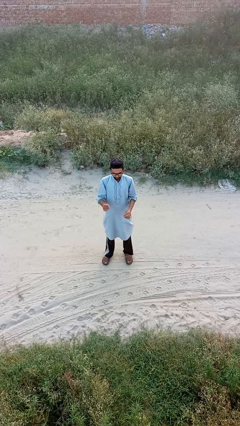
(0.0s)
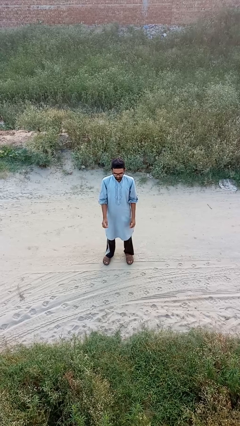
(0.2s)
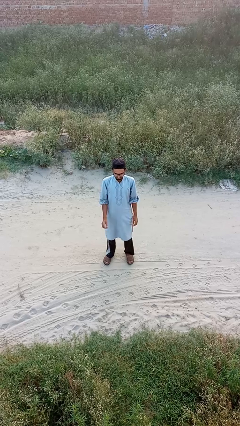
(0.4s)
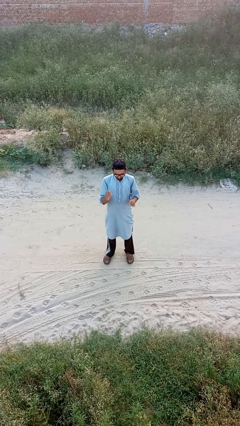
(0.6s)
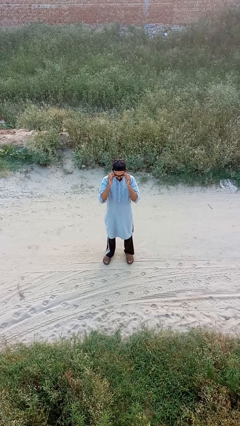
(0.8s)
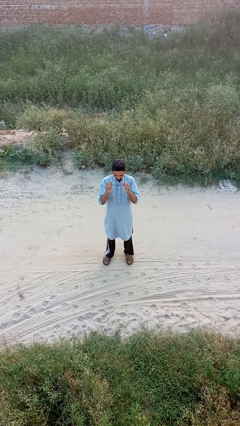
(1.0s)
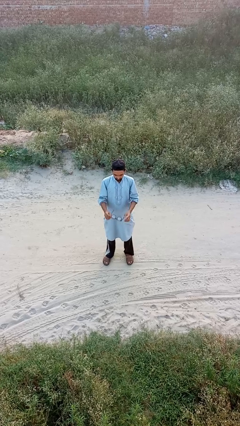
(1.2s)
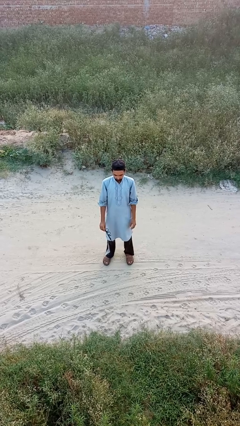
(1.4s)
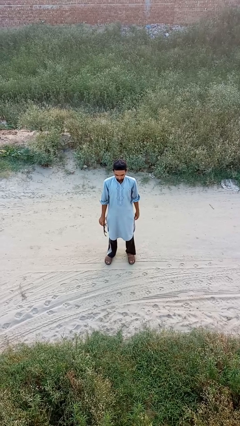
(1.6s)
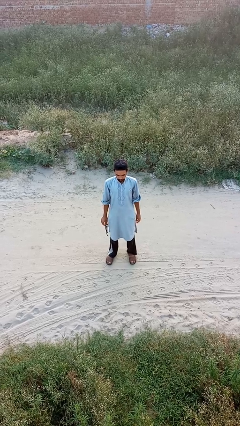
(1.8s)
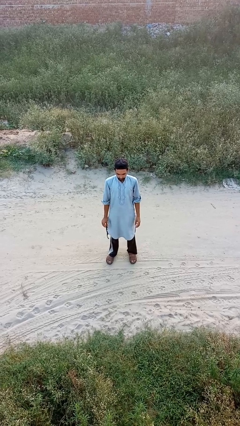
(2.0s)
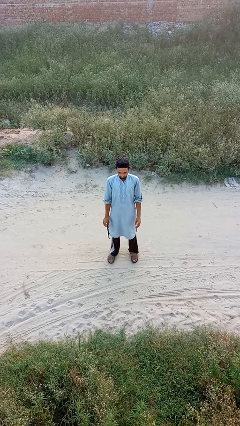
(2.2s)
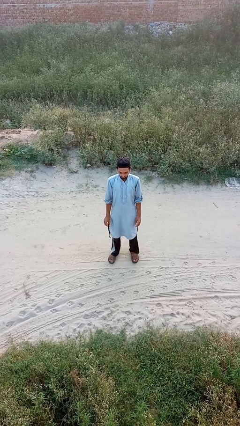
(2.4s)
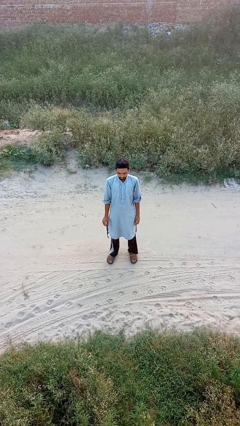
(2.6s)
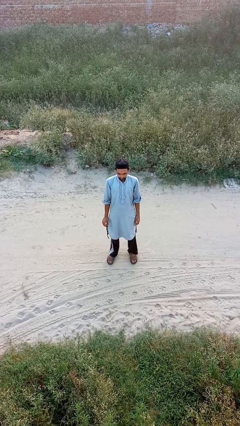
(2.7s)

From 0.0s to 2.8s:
person takes off glasses

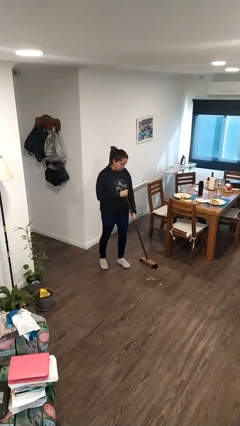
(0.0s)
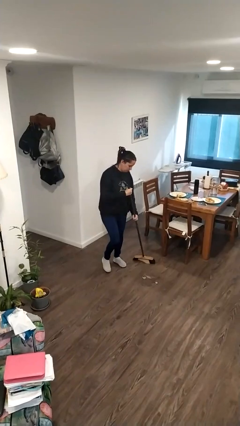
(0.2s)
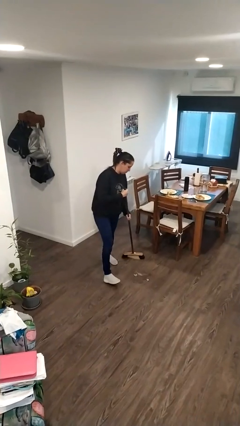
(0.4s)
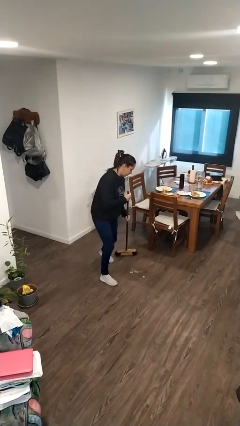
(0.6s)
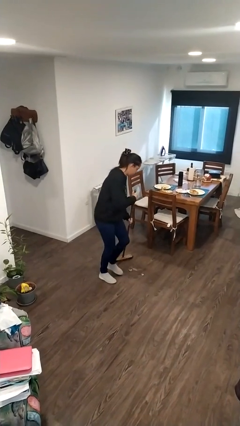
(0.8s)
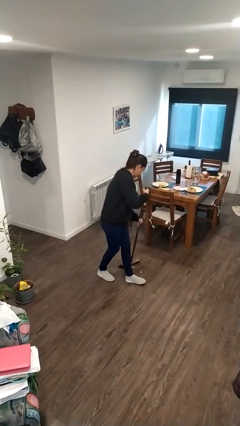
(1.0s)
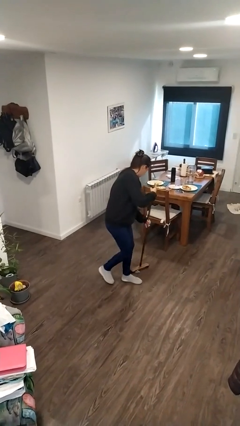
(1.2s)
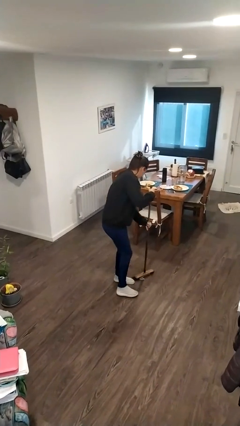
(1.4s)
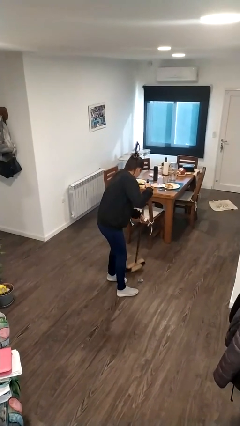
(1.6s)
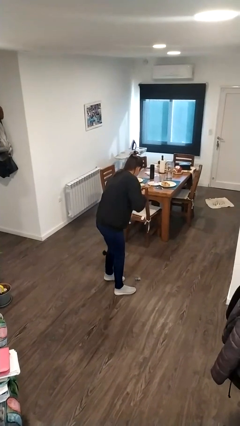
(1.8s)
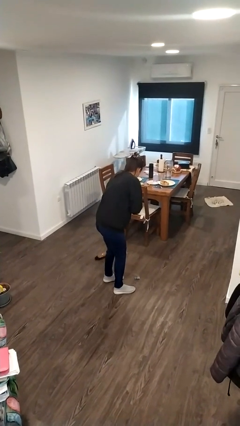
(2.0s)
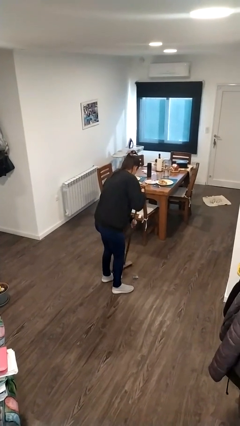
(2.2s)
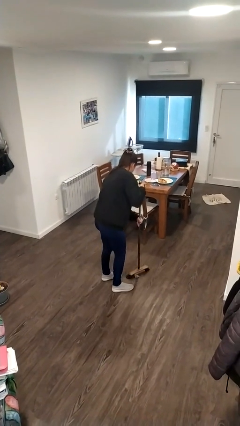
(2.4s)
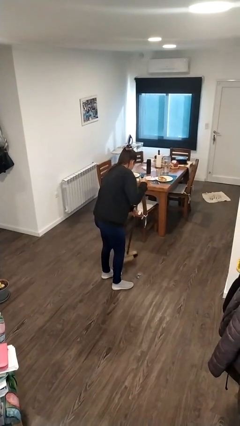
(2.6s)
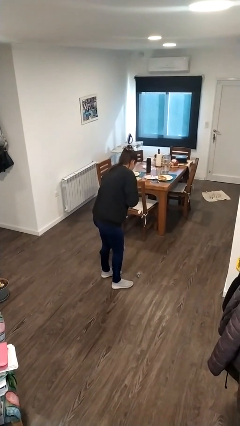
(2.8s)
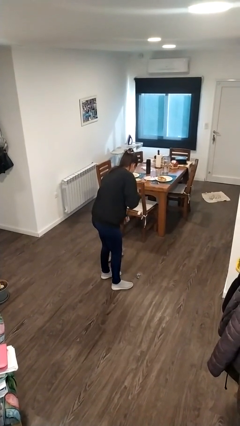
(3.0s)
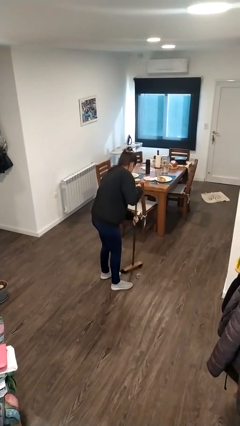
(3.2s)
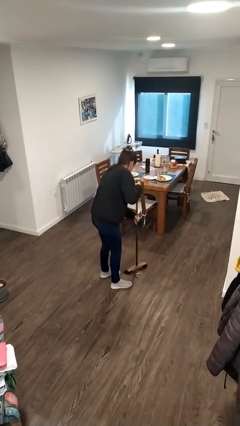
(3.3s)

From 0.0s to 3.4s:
person sweeps floor

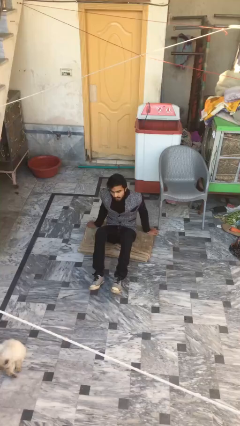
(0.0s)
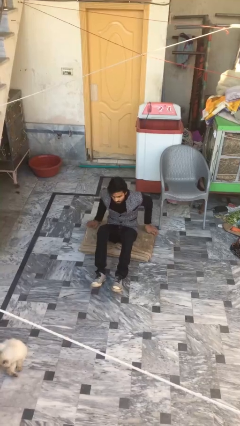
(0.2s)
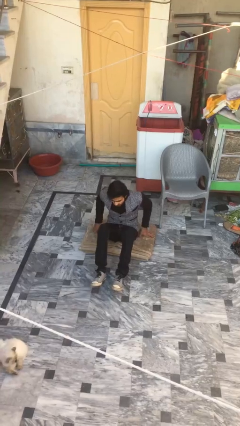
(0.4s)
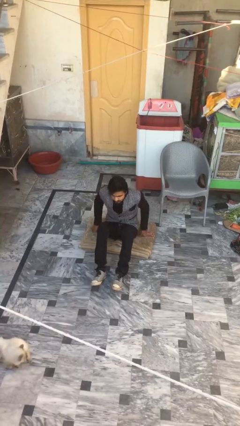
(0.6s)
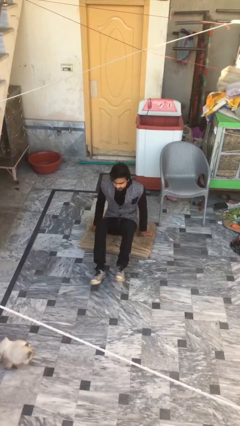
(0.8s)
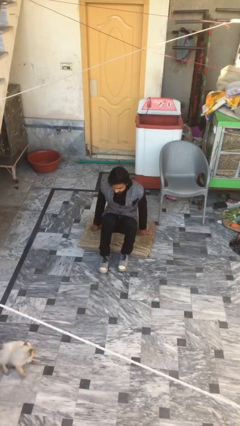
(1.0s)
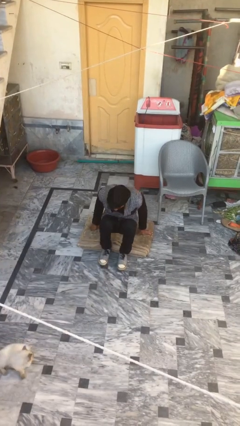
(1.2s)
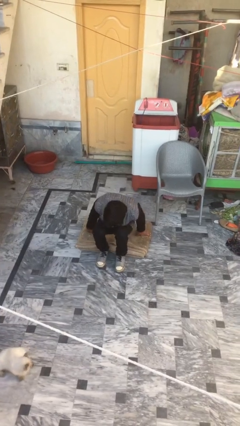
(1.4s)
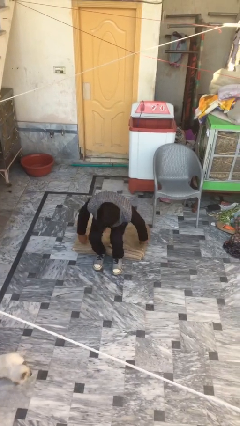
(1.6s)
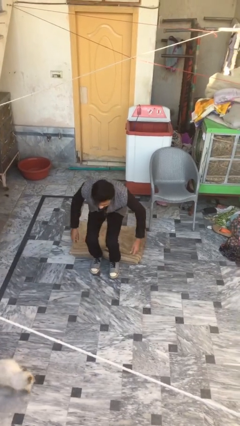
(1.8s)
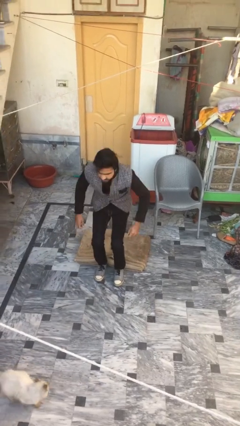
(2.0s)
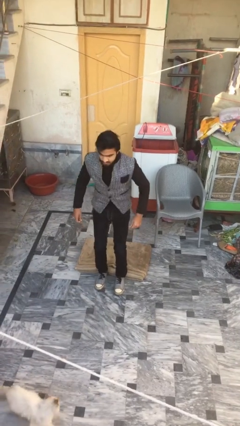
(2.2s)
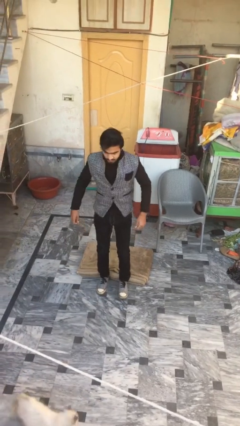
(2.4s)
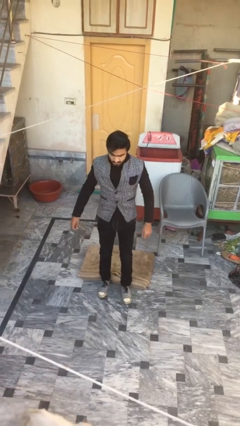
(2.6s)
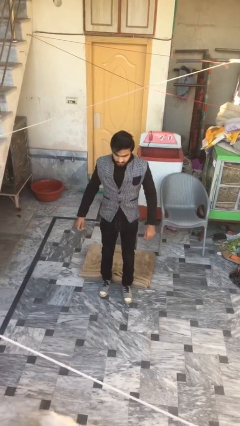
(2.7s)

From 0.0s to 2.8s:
person stands up

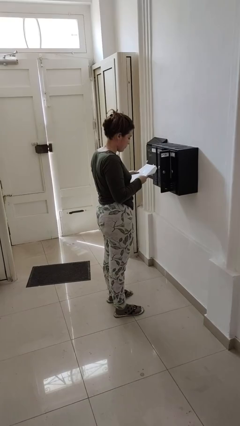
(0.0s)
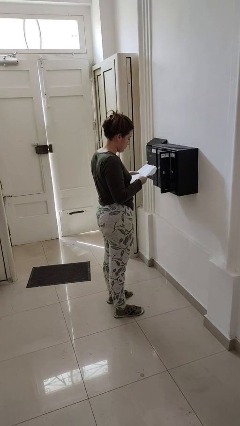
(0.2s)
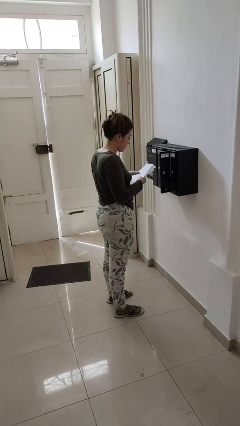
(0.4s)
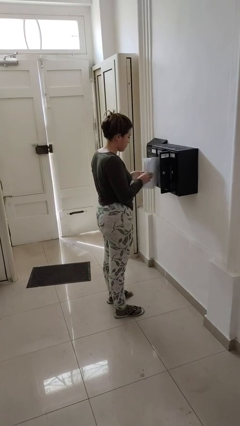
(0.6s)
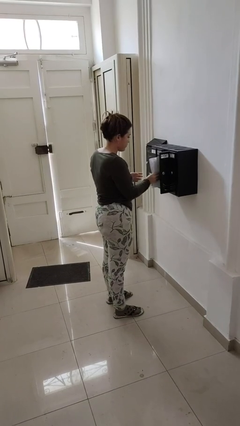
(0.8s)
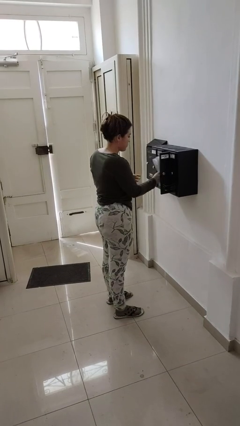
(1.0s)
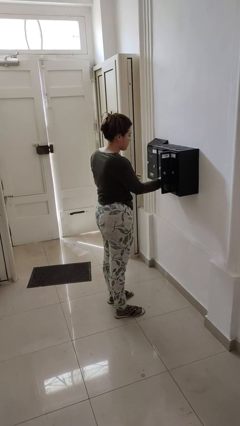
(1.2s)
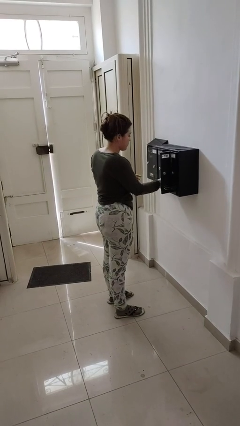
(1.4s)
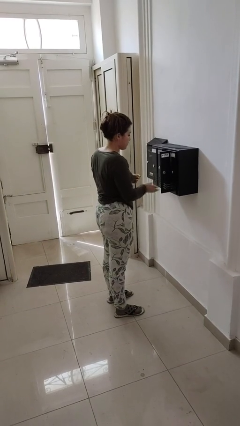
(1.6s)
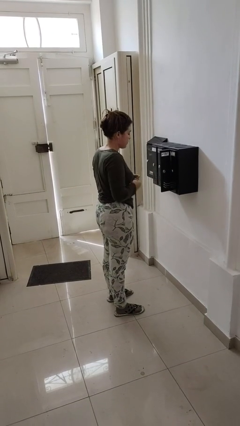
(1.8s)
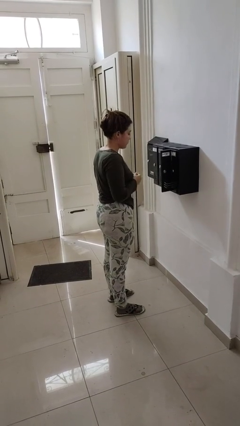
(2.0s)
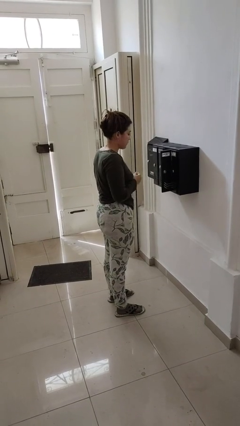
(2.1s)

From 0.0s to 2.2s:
person puts letters in mailbox

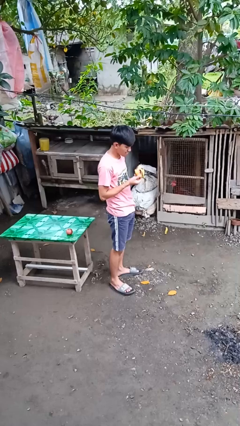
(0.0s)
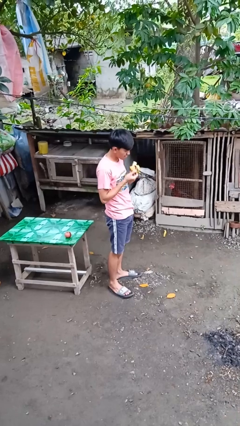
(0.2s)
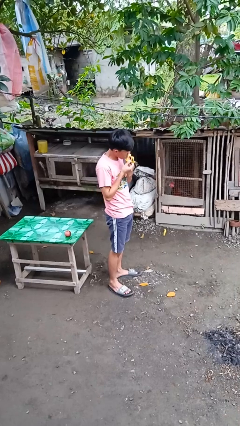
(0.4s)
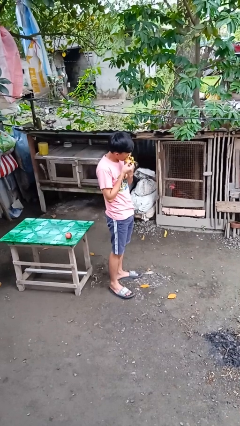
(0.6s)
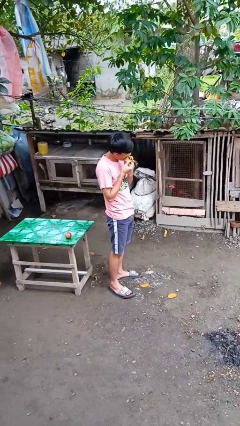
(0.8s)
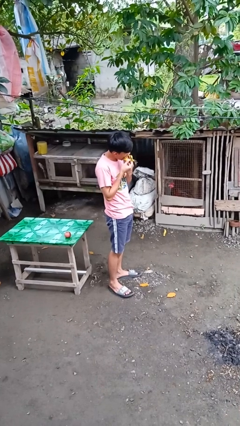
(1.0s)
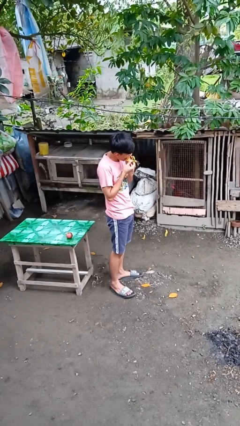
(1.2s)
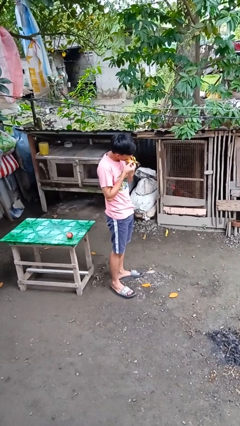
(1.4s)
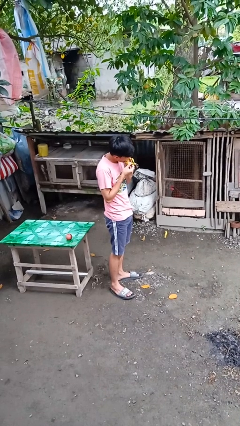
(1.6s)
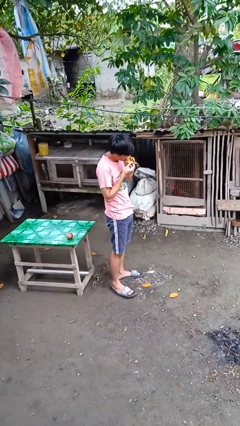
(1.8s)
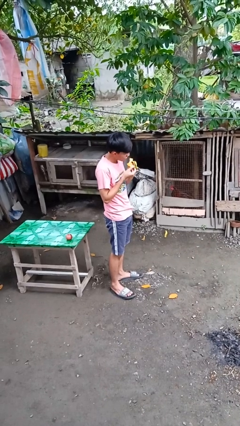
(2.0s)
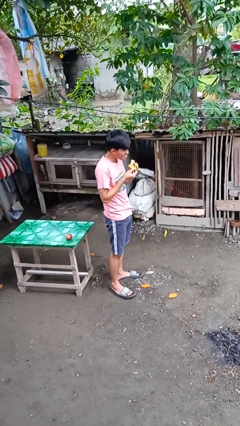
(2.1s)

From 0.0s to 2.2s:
person eats banana

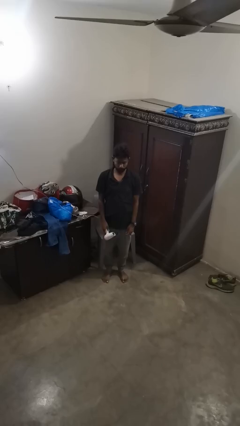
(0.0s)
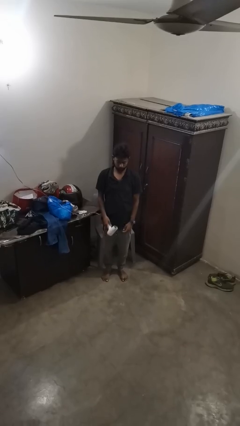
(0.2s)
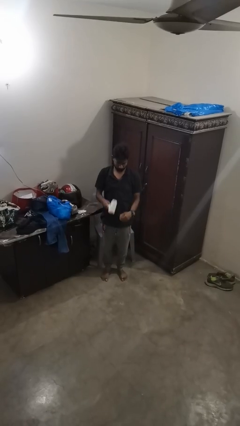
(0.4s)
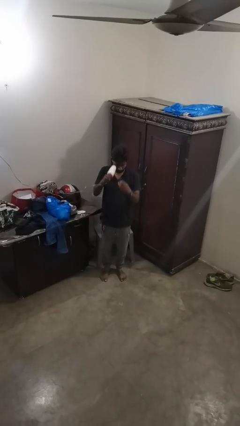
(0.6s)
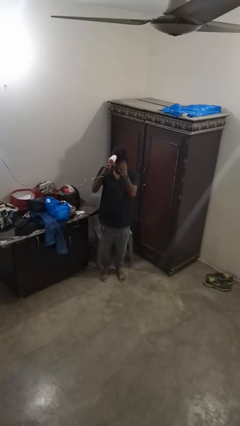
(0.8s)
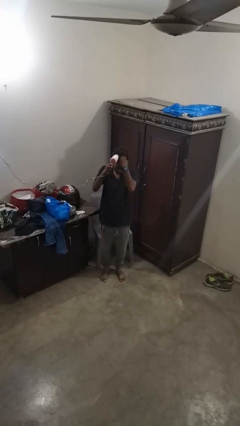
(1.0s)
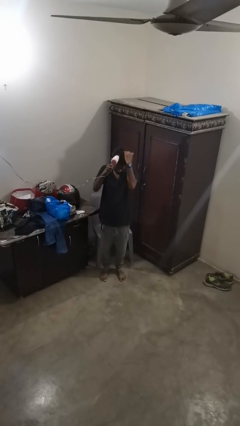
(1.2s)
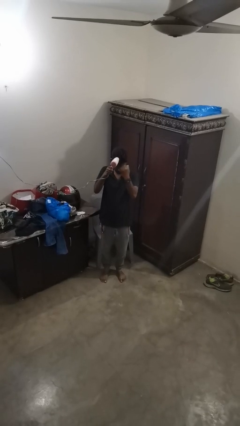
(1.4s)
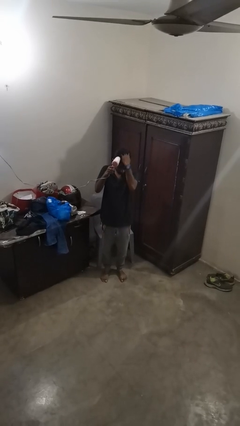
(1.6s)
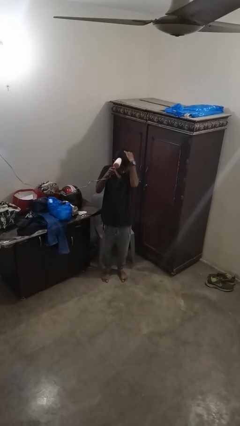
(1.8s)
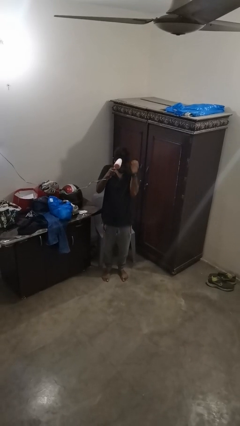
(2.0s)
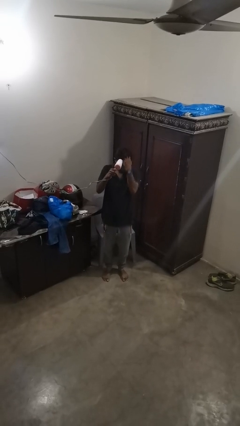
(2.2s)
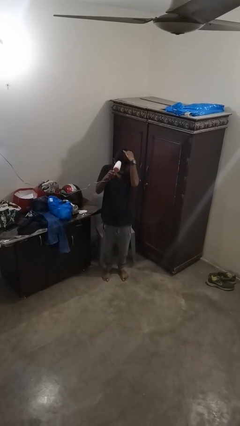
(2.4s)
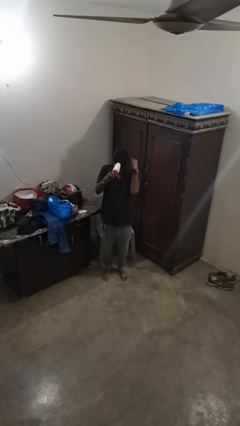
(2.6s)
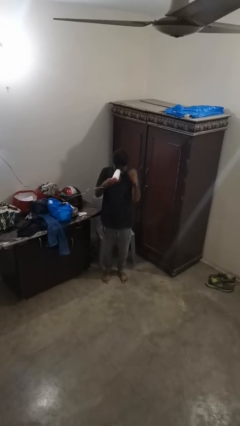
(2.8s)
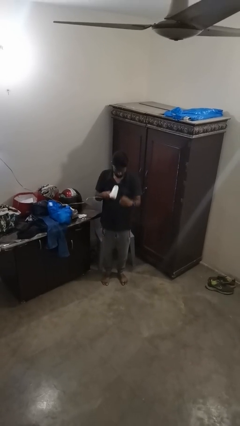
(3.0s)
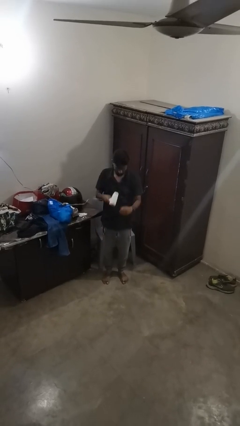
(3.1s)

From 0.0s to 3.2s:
person dries hair with hairdryer

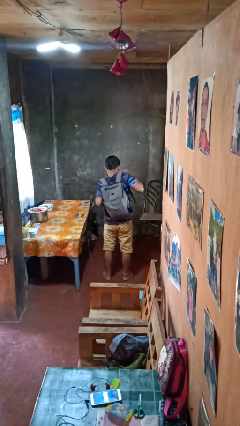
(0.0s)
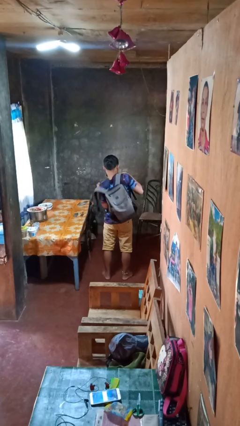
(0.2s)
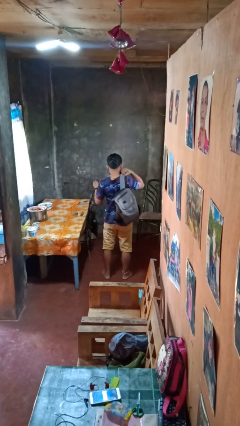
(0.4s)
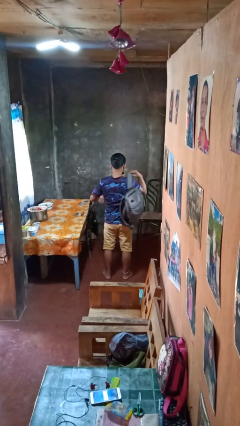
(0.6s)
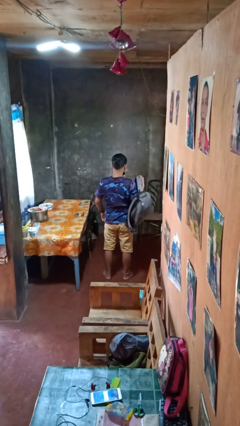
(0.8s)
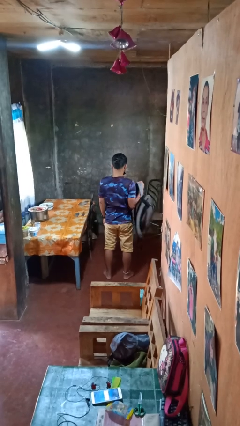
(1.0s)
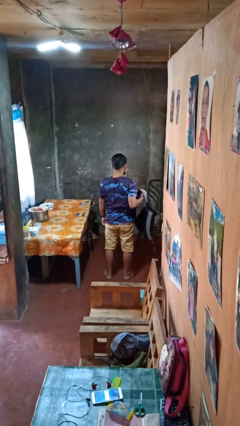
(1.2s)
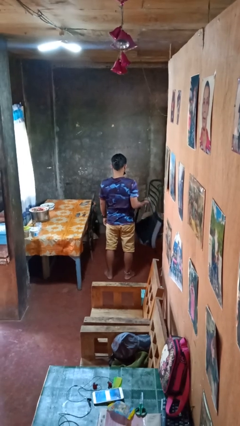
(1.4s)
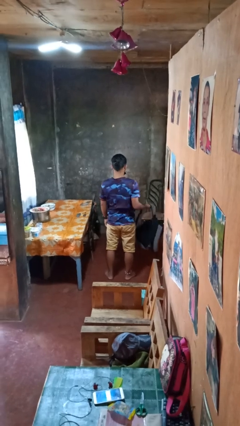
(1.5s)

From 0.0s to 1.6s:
person takes off backpack
